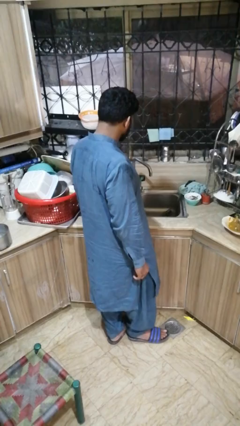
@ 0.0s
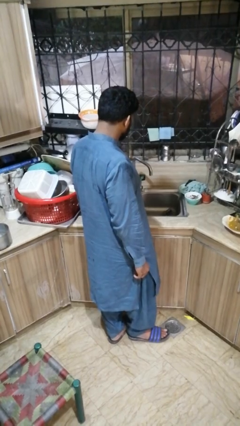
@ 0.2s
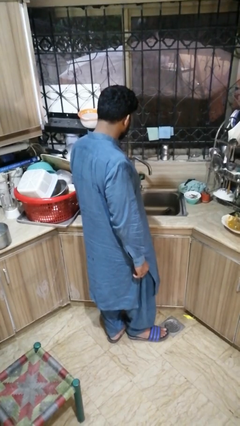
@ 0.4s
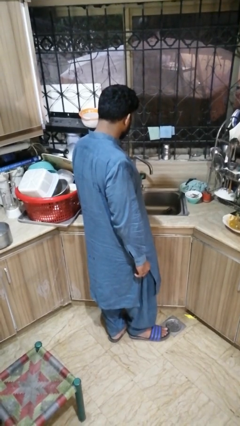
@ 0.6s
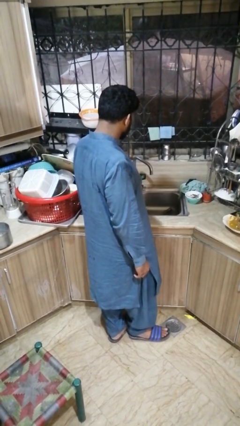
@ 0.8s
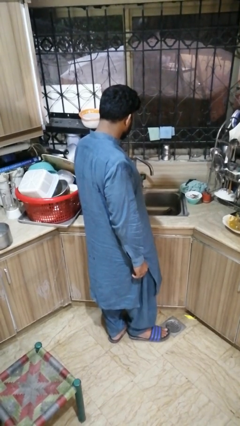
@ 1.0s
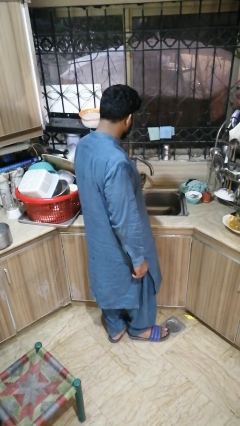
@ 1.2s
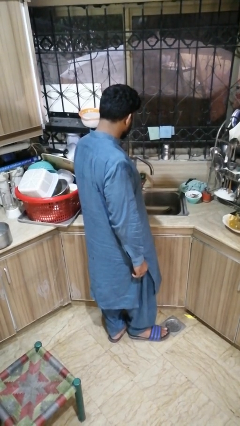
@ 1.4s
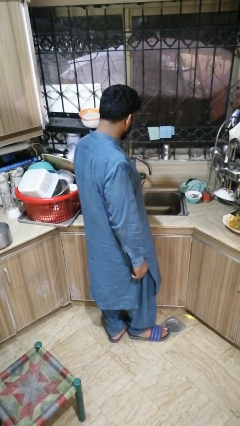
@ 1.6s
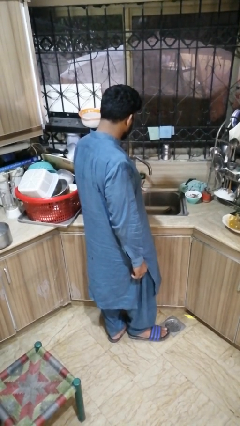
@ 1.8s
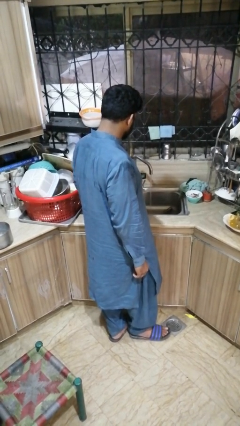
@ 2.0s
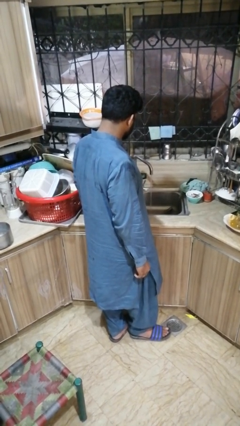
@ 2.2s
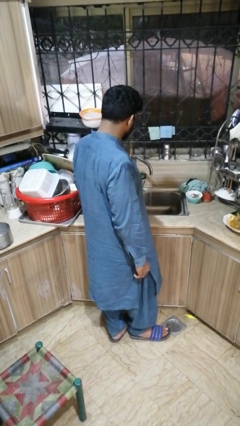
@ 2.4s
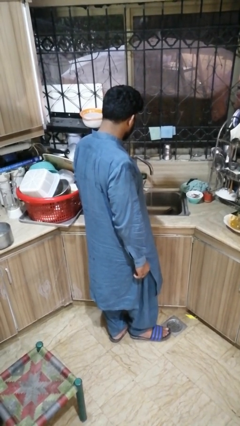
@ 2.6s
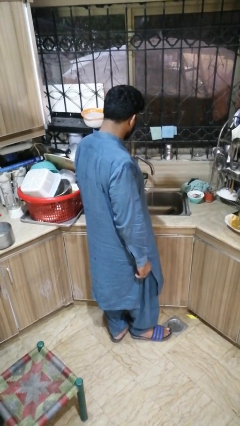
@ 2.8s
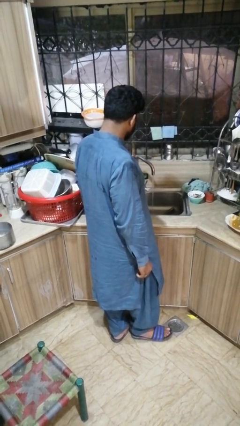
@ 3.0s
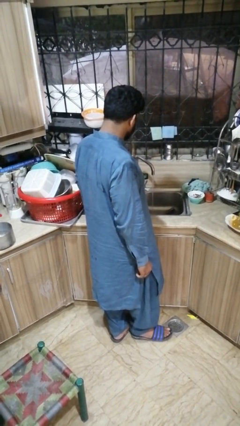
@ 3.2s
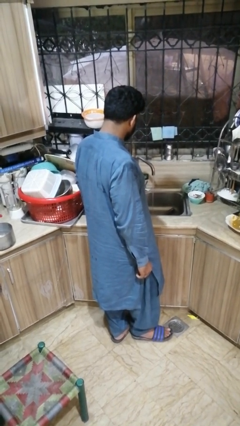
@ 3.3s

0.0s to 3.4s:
person turns on faucet

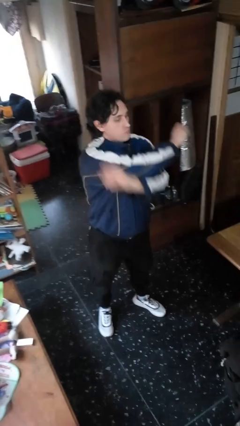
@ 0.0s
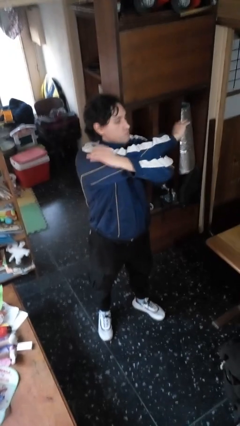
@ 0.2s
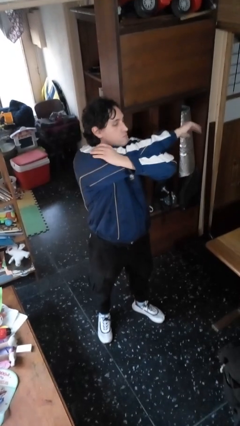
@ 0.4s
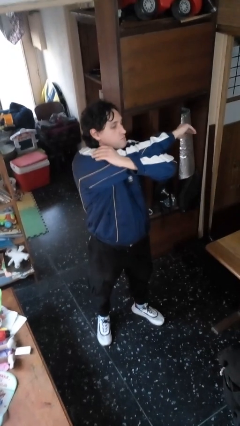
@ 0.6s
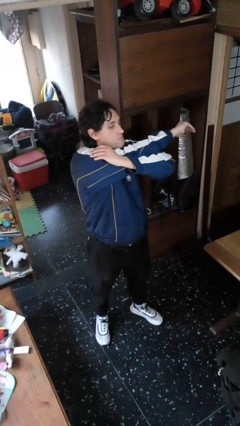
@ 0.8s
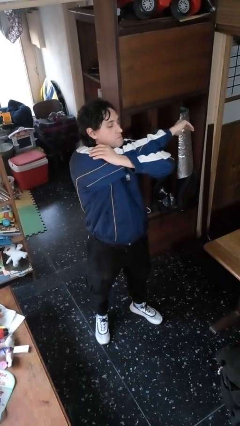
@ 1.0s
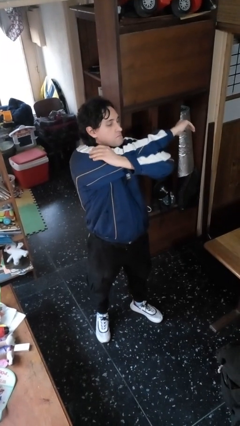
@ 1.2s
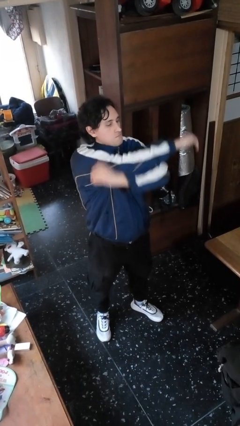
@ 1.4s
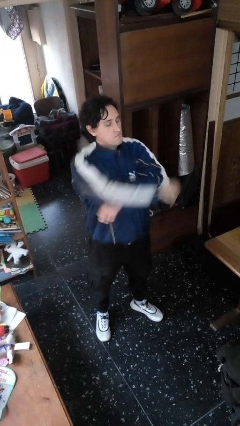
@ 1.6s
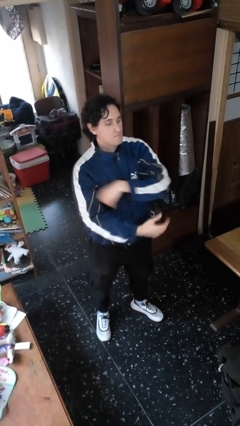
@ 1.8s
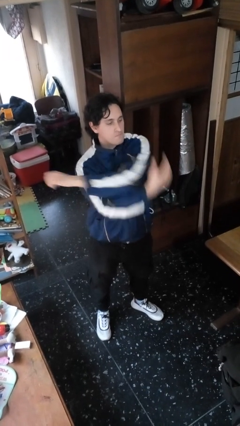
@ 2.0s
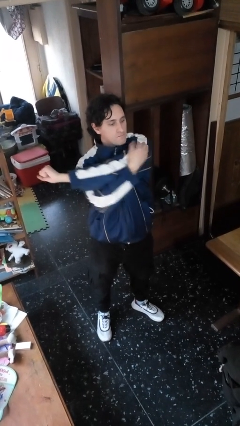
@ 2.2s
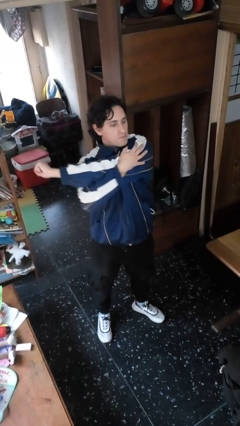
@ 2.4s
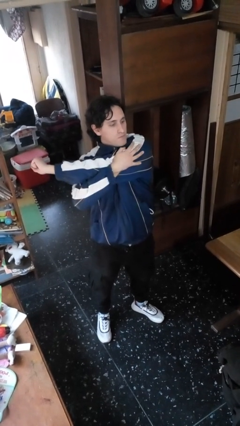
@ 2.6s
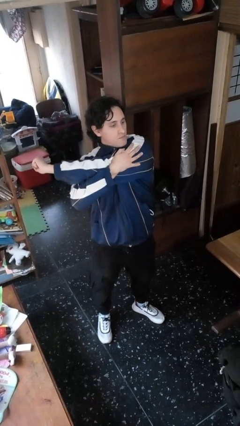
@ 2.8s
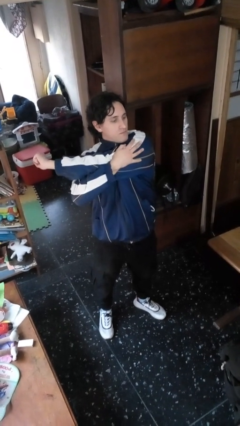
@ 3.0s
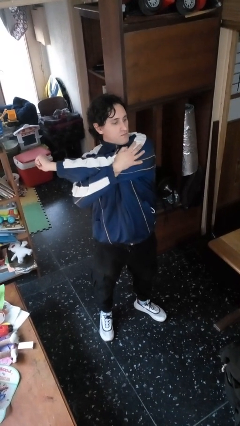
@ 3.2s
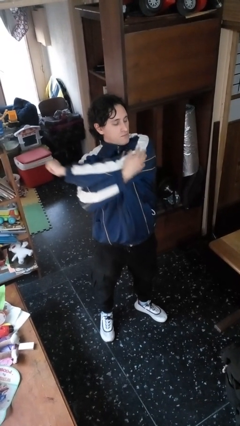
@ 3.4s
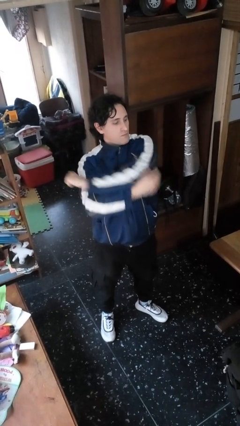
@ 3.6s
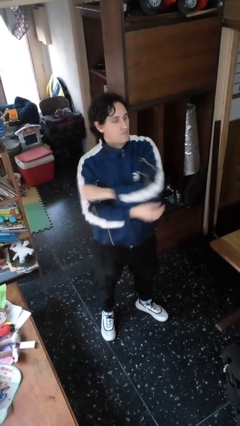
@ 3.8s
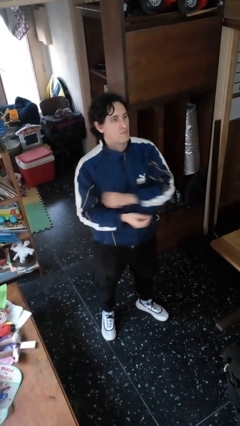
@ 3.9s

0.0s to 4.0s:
person stretches arms to side

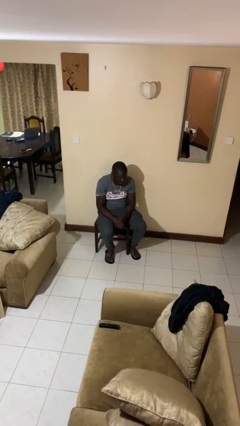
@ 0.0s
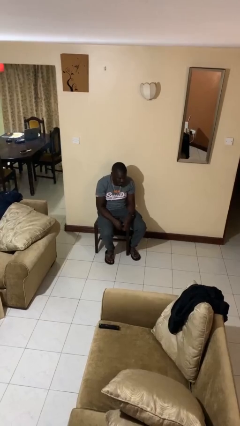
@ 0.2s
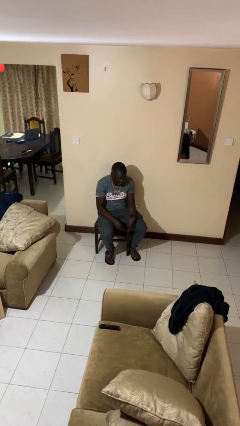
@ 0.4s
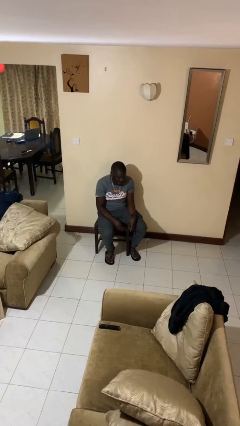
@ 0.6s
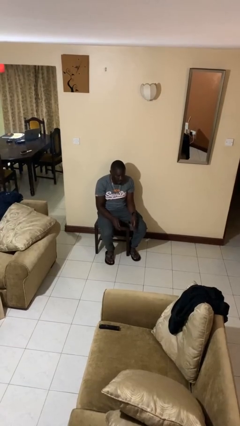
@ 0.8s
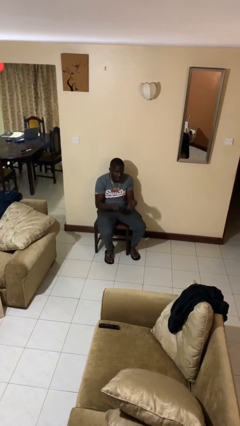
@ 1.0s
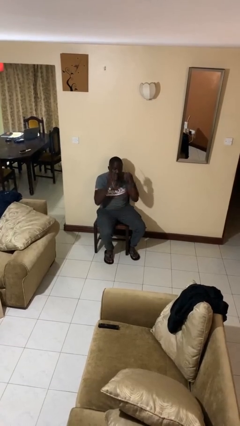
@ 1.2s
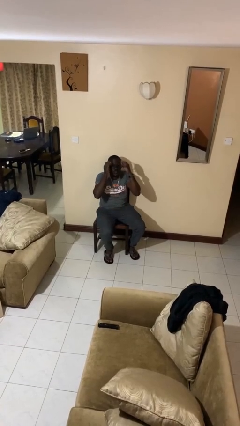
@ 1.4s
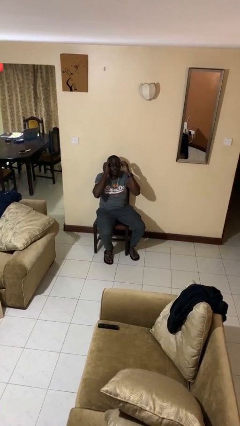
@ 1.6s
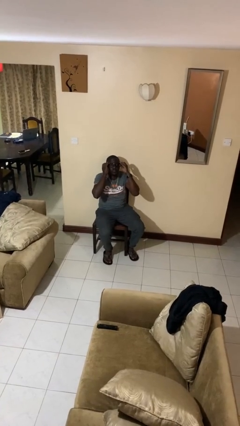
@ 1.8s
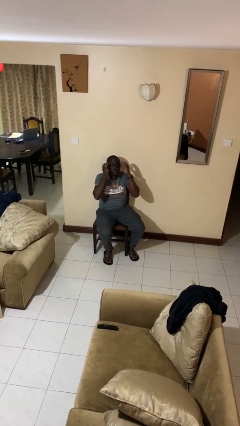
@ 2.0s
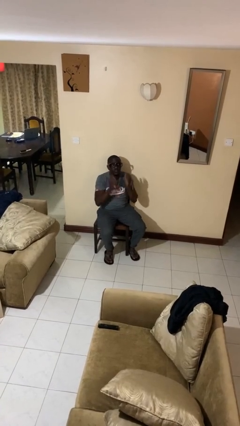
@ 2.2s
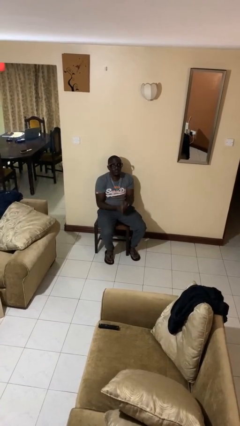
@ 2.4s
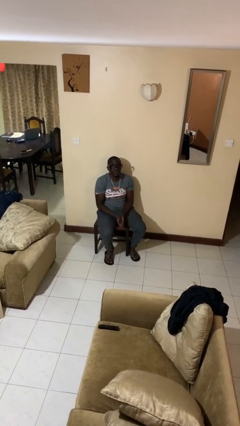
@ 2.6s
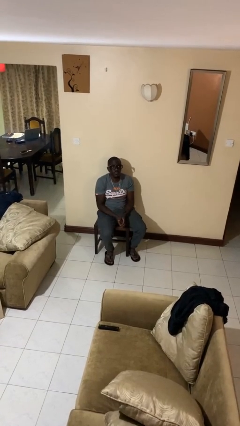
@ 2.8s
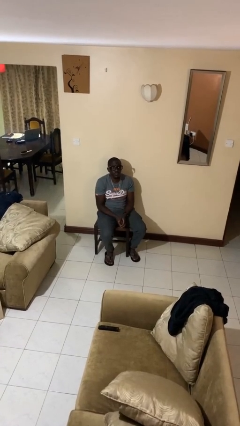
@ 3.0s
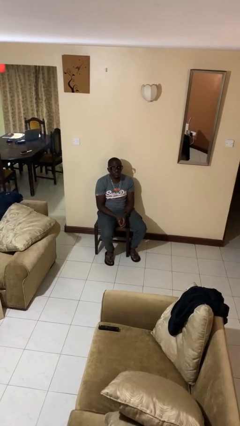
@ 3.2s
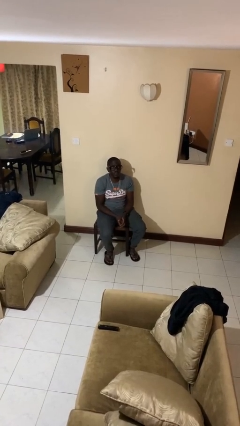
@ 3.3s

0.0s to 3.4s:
person puts on glasses

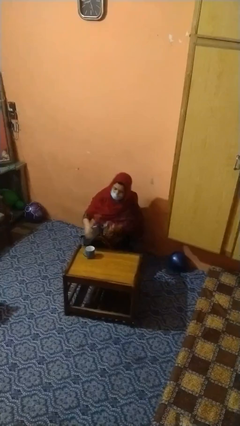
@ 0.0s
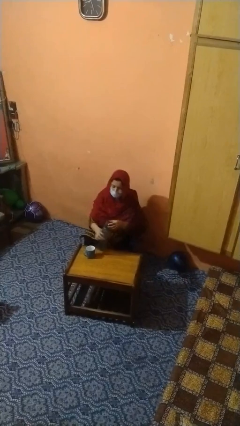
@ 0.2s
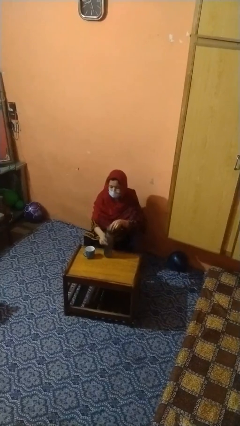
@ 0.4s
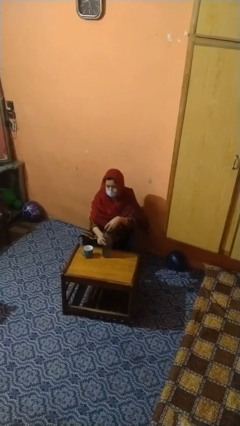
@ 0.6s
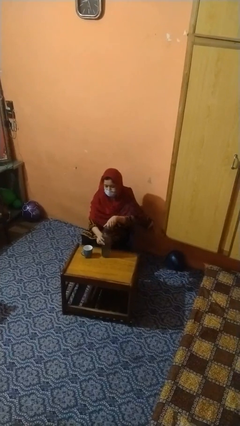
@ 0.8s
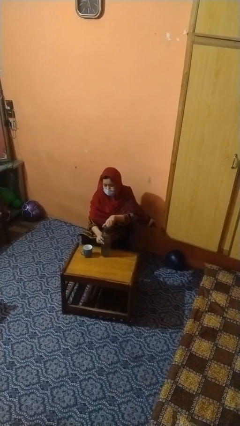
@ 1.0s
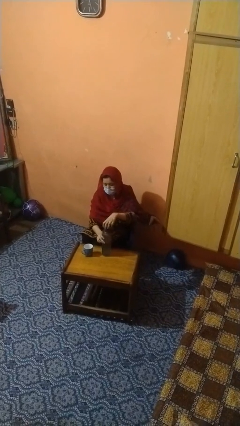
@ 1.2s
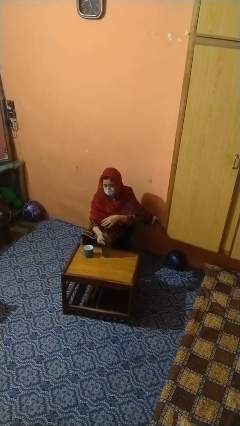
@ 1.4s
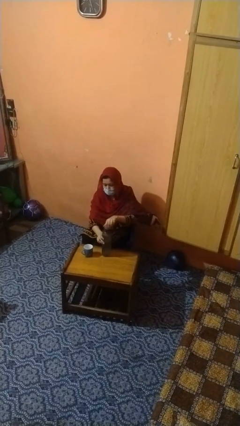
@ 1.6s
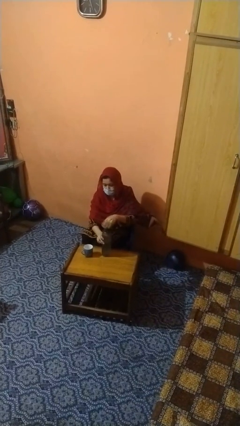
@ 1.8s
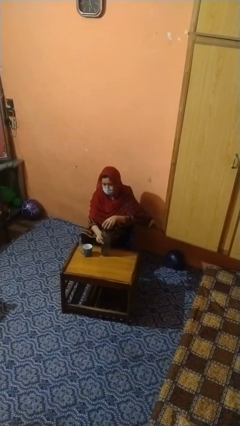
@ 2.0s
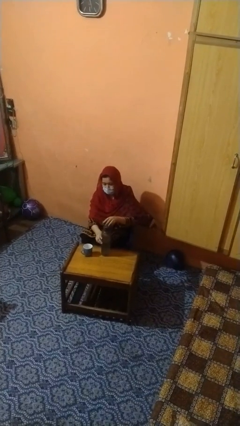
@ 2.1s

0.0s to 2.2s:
person screws lid to bottle

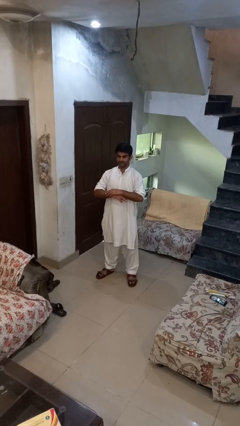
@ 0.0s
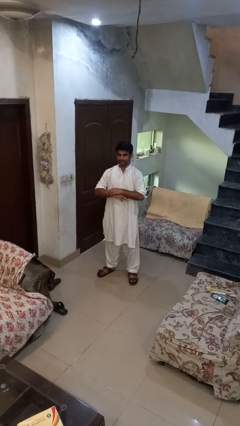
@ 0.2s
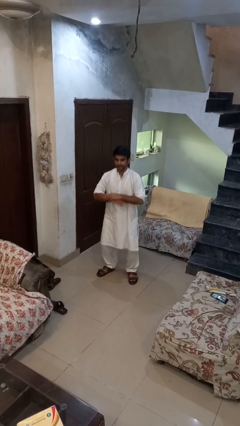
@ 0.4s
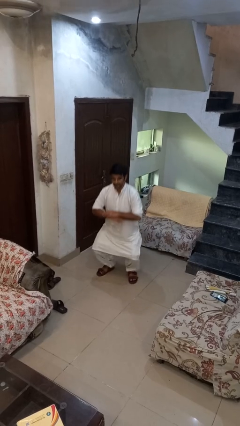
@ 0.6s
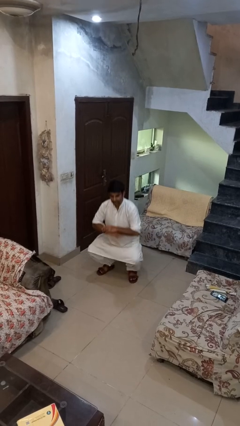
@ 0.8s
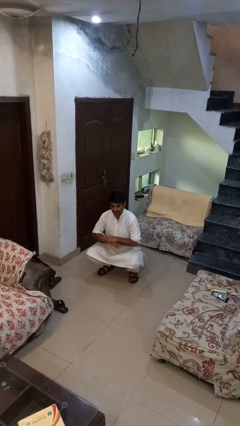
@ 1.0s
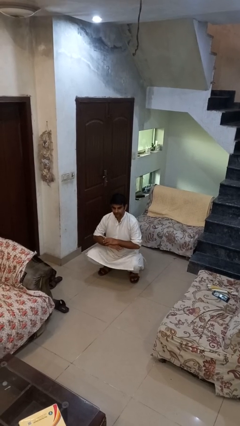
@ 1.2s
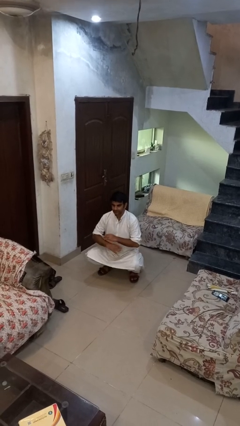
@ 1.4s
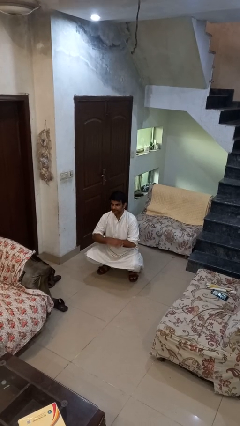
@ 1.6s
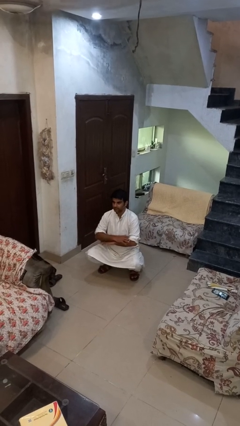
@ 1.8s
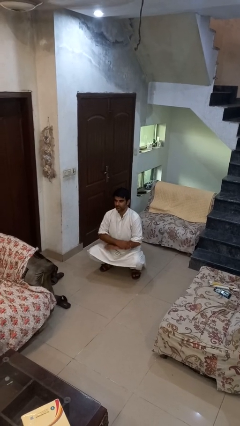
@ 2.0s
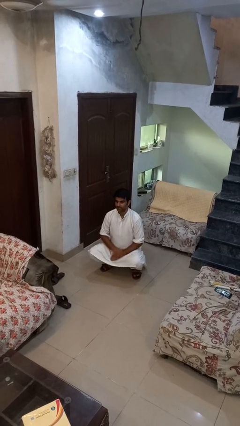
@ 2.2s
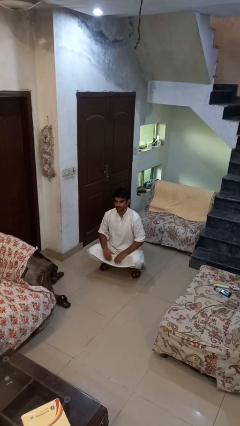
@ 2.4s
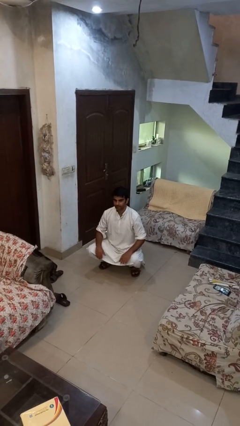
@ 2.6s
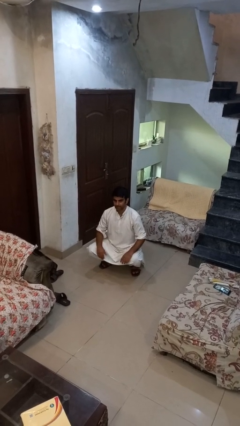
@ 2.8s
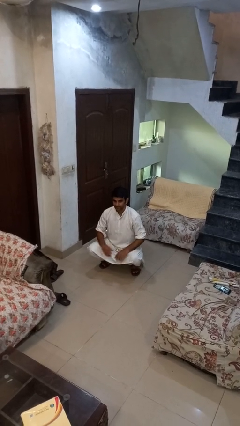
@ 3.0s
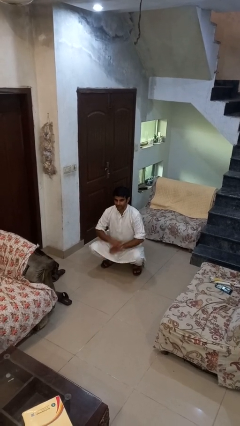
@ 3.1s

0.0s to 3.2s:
person squats

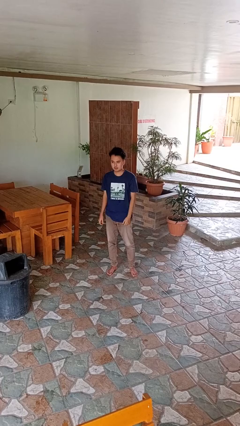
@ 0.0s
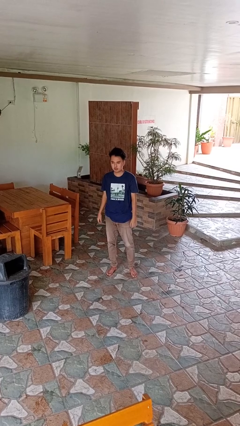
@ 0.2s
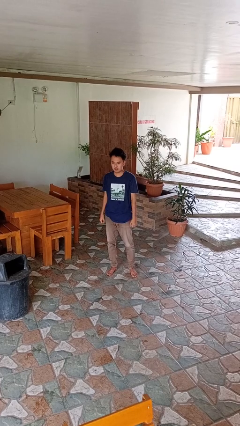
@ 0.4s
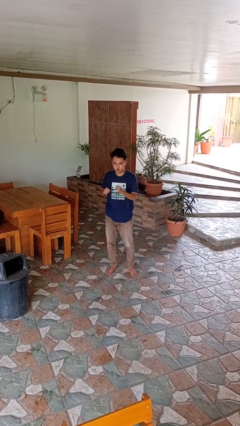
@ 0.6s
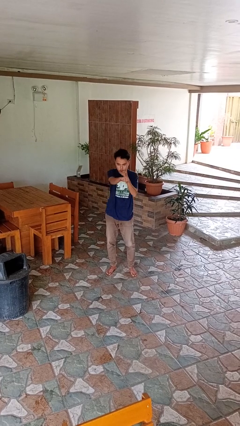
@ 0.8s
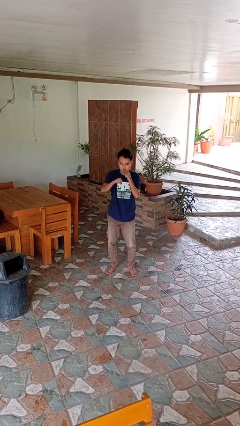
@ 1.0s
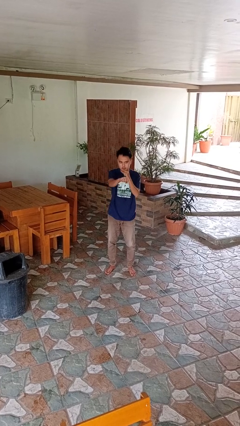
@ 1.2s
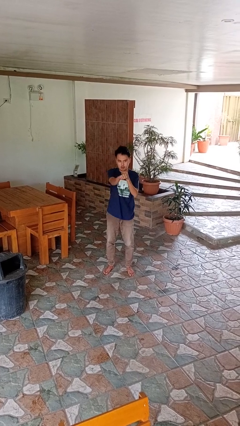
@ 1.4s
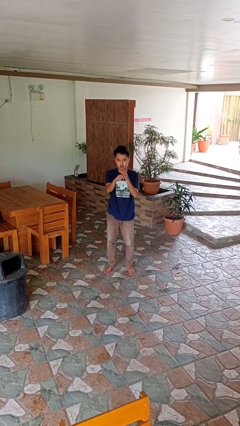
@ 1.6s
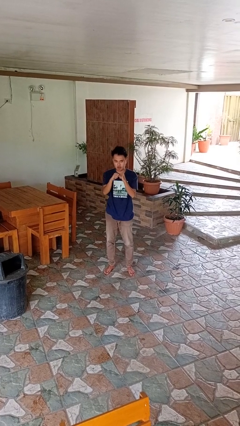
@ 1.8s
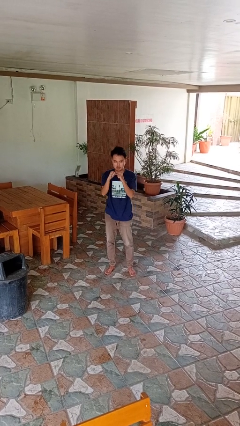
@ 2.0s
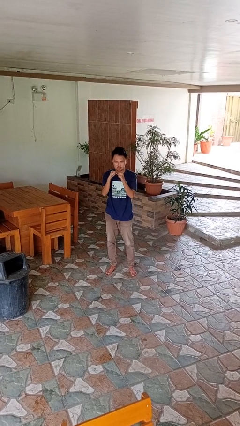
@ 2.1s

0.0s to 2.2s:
person punches
